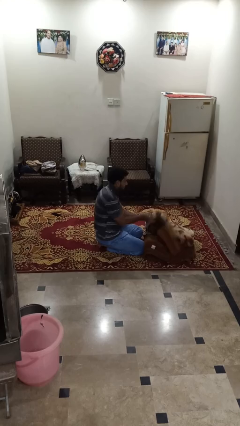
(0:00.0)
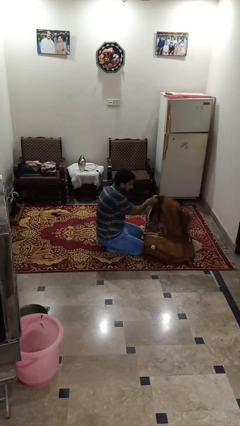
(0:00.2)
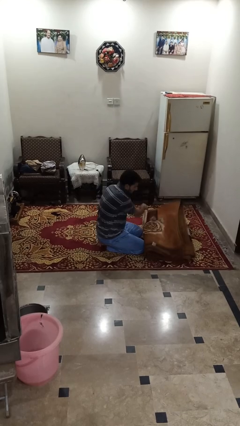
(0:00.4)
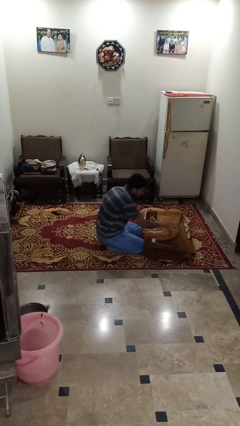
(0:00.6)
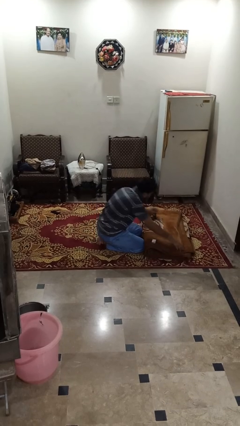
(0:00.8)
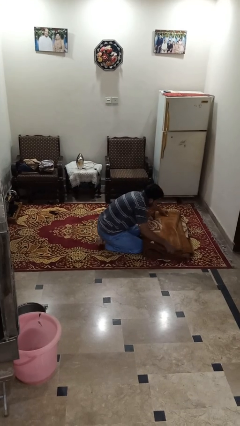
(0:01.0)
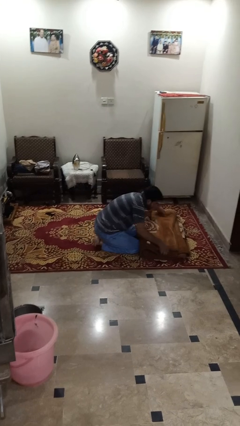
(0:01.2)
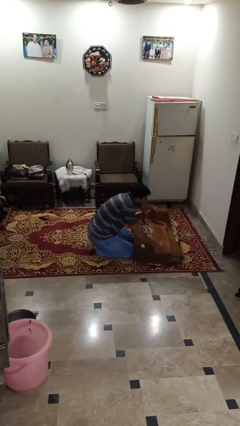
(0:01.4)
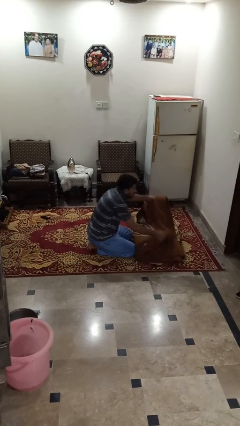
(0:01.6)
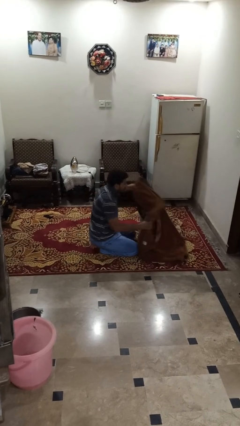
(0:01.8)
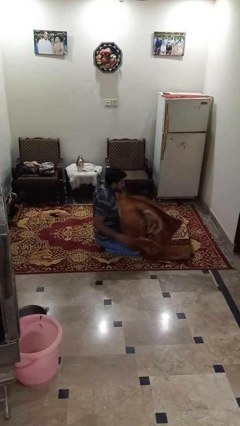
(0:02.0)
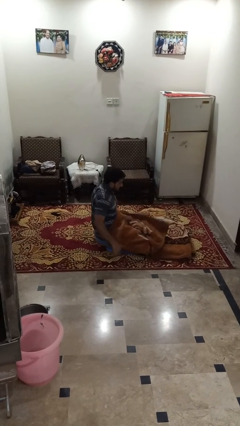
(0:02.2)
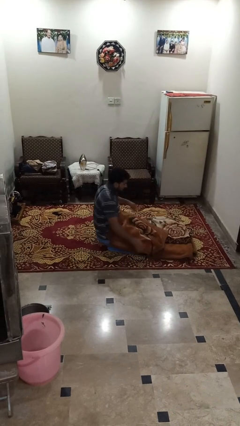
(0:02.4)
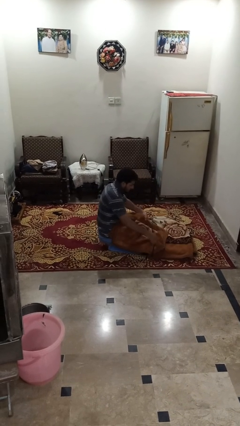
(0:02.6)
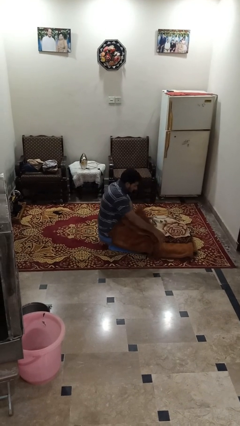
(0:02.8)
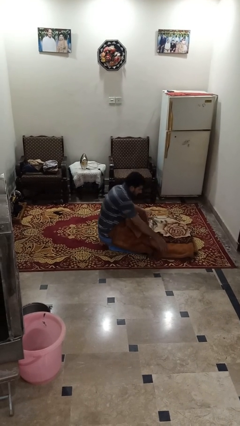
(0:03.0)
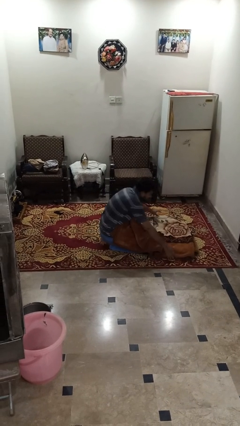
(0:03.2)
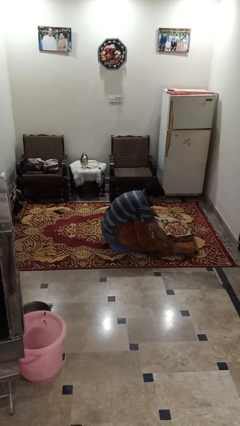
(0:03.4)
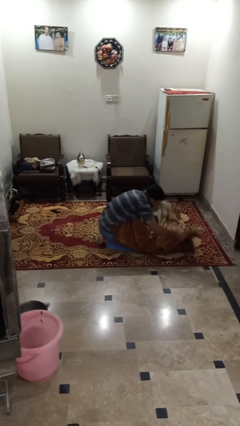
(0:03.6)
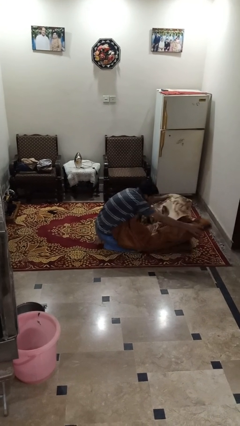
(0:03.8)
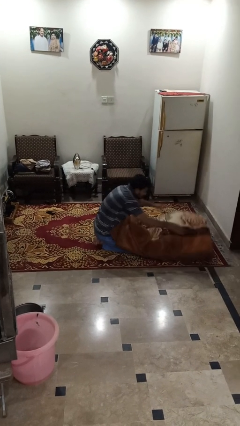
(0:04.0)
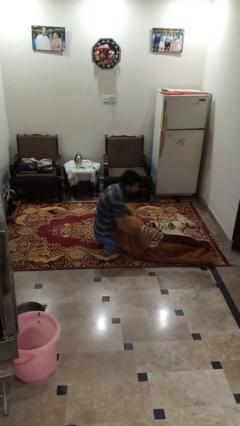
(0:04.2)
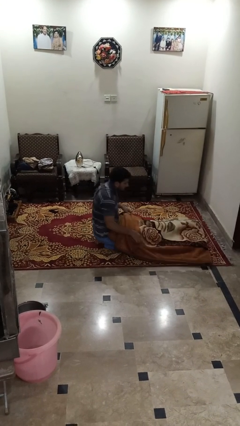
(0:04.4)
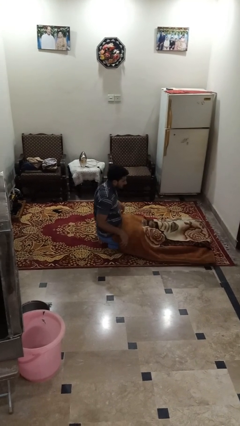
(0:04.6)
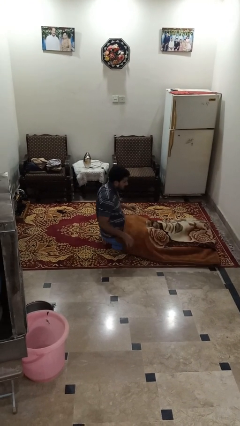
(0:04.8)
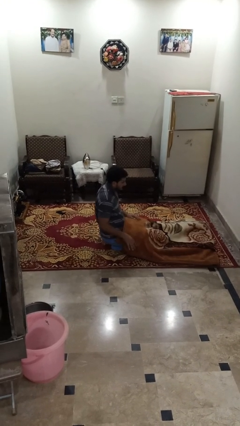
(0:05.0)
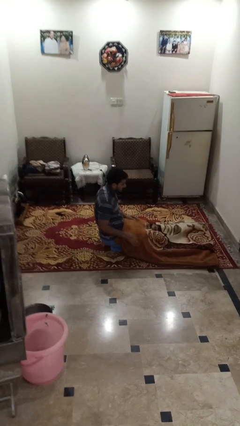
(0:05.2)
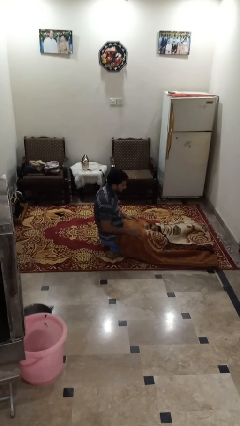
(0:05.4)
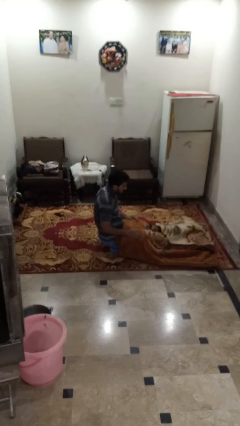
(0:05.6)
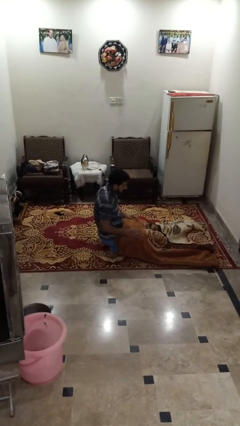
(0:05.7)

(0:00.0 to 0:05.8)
person unfolds blanket

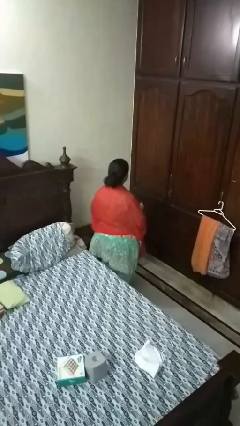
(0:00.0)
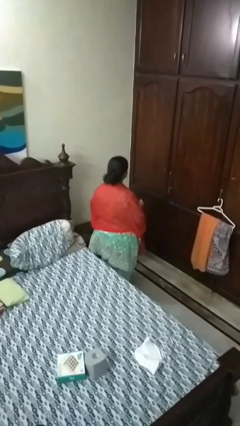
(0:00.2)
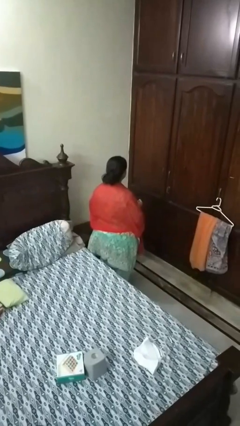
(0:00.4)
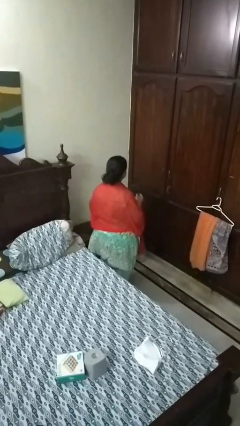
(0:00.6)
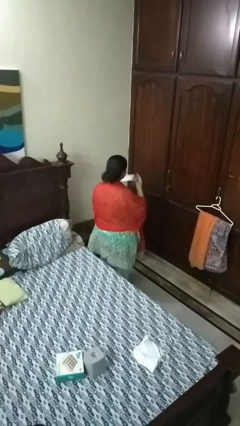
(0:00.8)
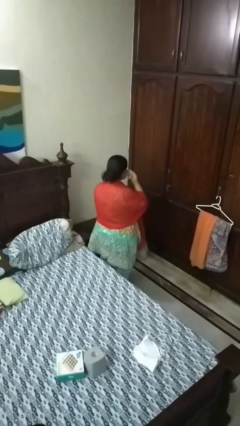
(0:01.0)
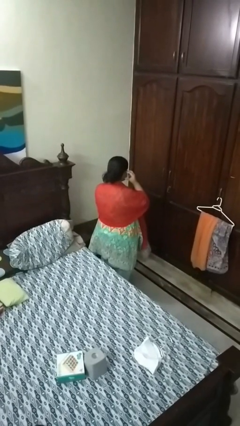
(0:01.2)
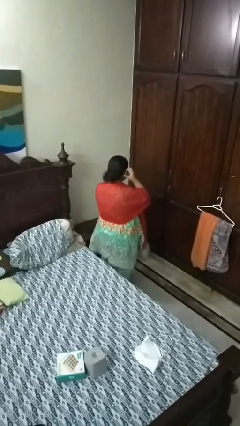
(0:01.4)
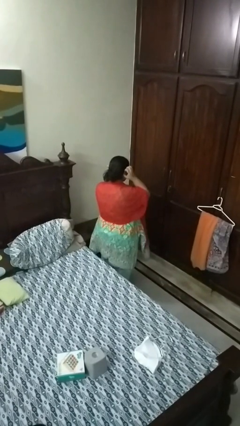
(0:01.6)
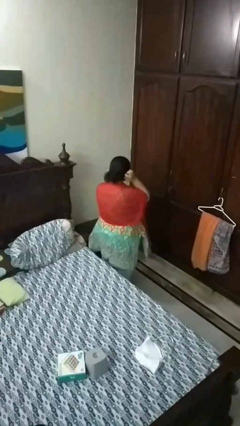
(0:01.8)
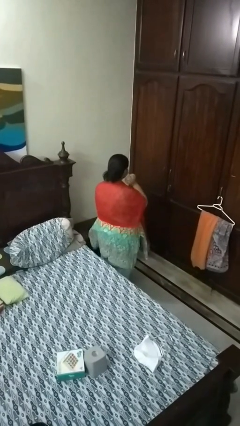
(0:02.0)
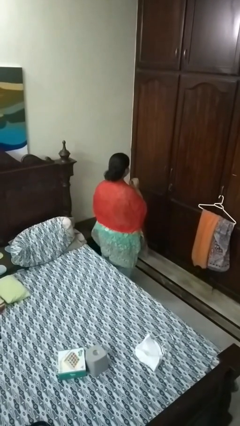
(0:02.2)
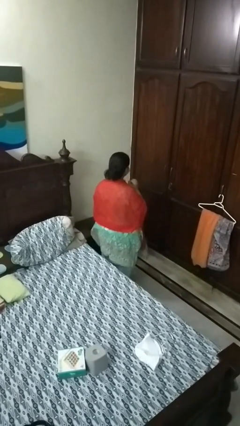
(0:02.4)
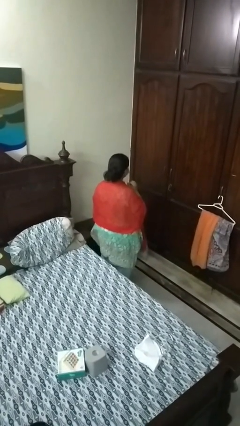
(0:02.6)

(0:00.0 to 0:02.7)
person puts on facemask
